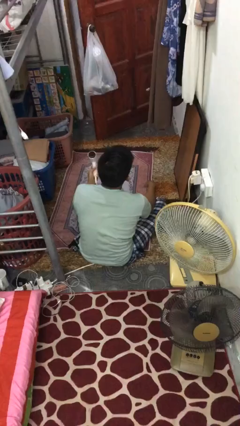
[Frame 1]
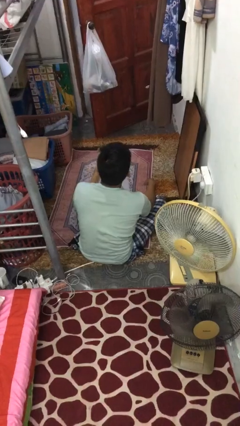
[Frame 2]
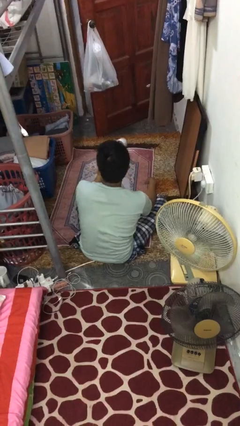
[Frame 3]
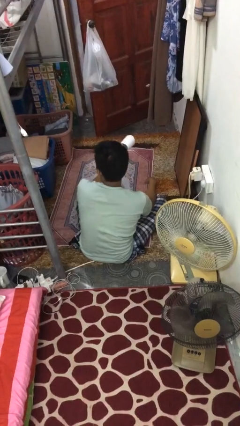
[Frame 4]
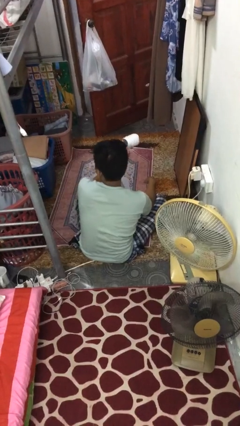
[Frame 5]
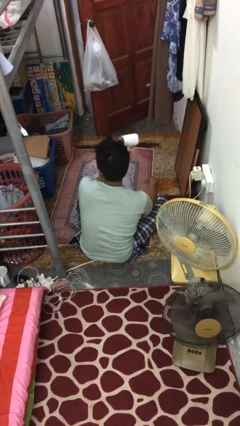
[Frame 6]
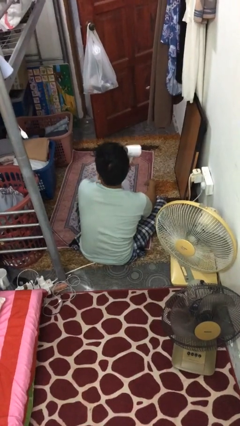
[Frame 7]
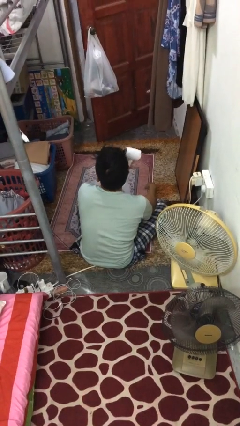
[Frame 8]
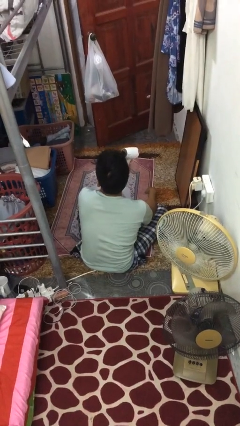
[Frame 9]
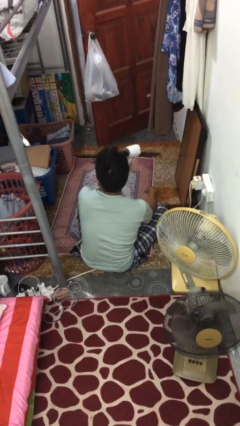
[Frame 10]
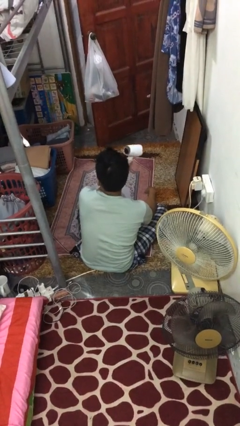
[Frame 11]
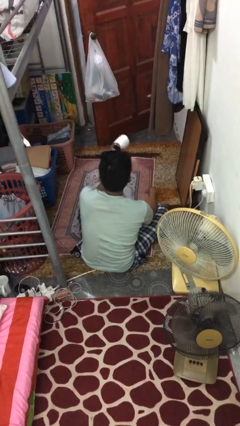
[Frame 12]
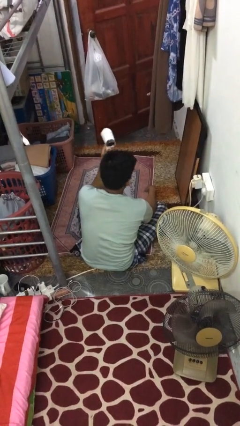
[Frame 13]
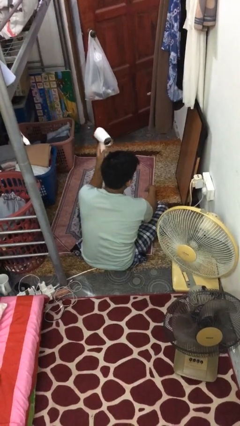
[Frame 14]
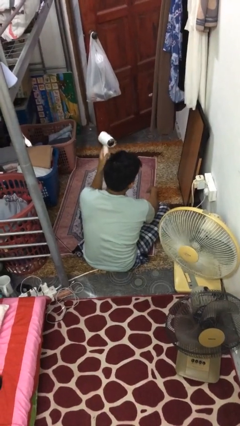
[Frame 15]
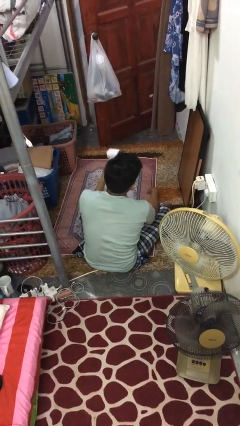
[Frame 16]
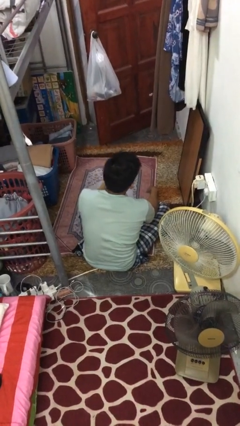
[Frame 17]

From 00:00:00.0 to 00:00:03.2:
person dries hair with hairdryer

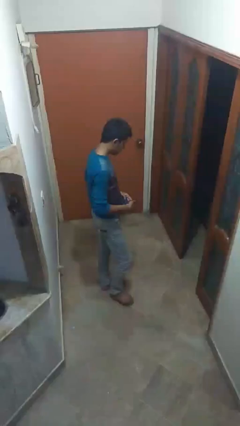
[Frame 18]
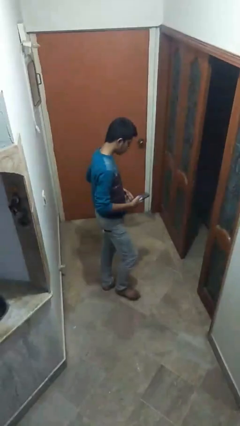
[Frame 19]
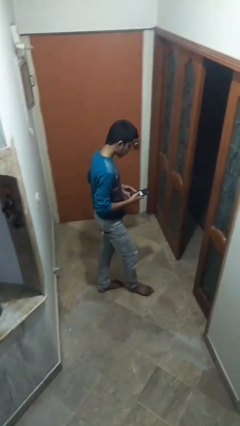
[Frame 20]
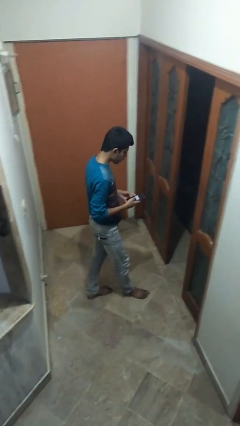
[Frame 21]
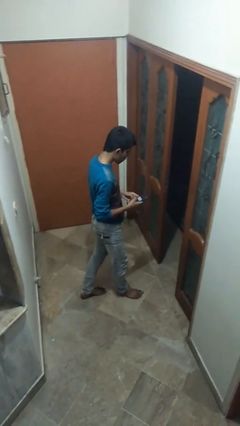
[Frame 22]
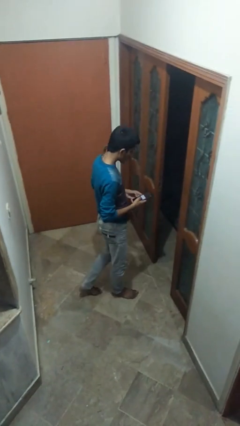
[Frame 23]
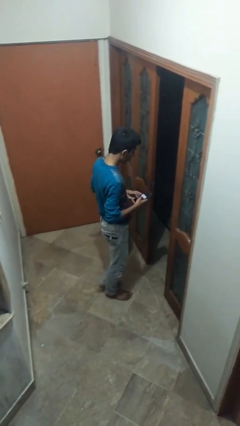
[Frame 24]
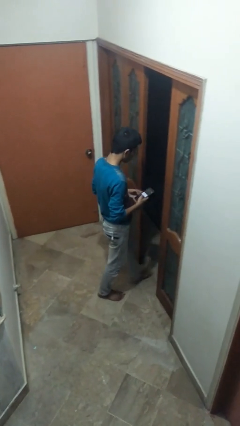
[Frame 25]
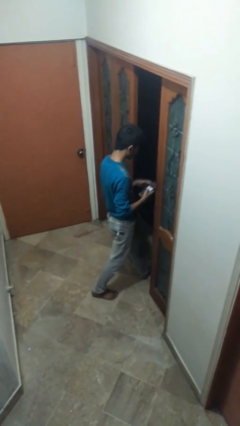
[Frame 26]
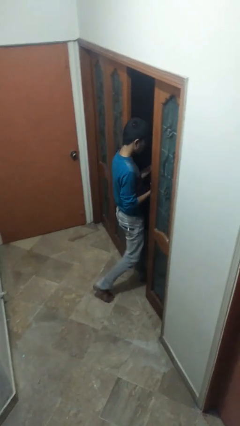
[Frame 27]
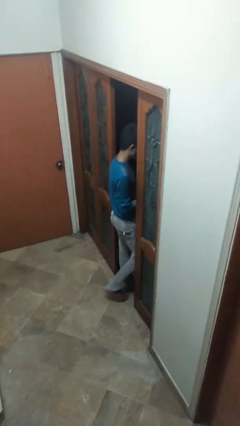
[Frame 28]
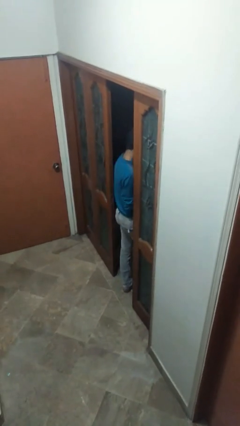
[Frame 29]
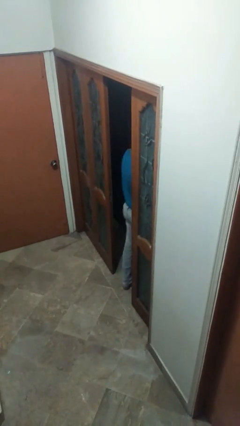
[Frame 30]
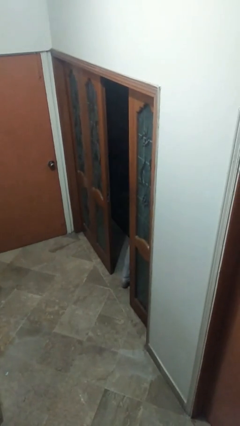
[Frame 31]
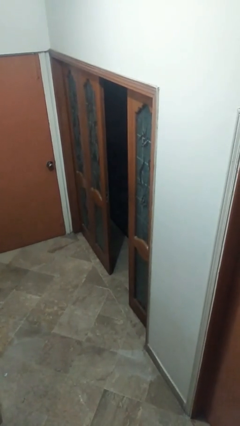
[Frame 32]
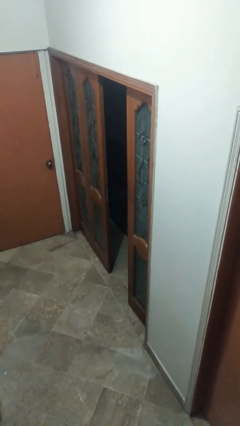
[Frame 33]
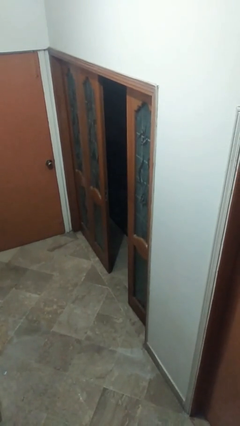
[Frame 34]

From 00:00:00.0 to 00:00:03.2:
person exits scene through structure

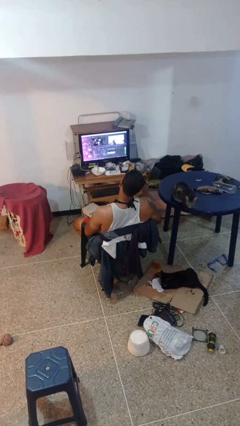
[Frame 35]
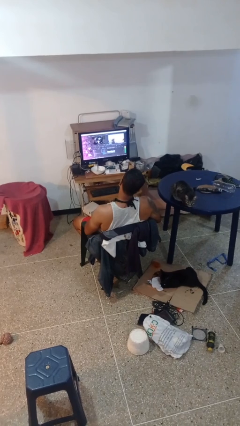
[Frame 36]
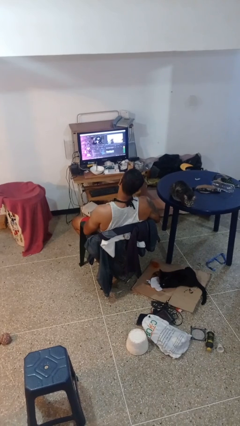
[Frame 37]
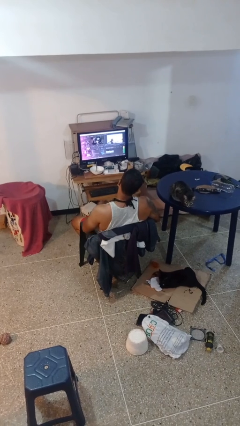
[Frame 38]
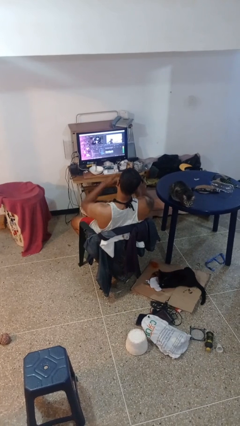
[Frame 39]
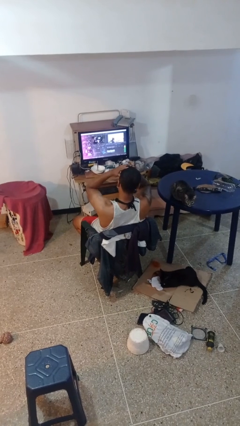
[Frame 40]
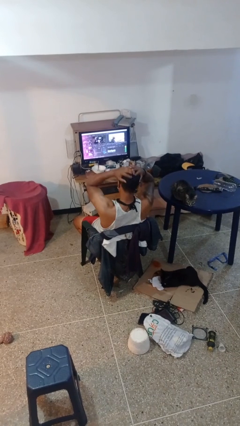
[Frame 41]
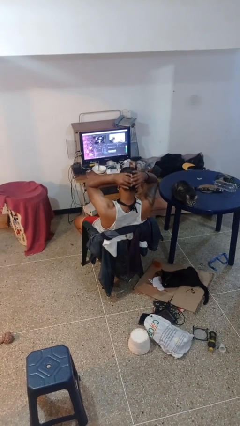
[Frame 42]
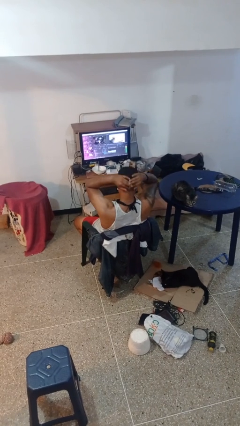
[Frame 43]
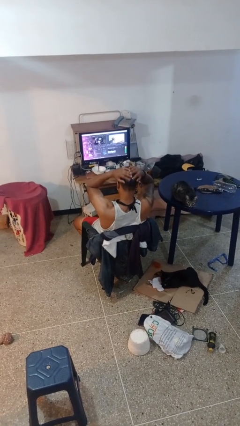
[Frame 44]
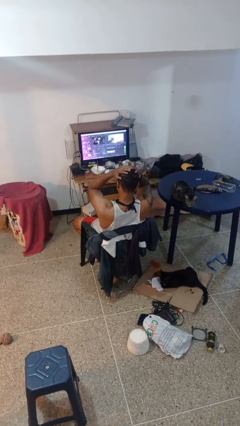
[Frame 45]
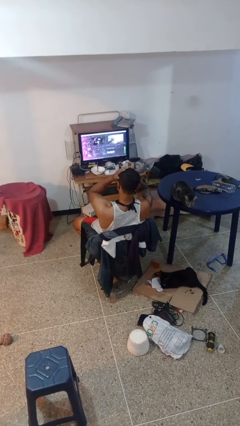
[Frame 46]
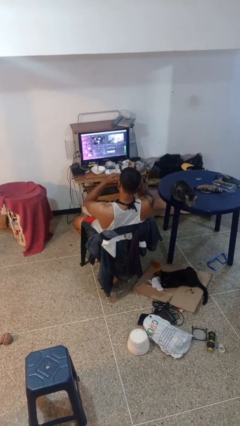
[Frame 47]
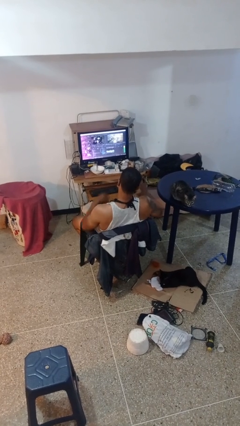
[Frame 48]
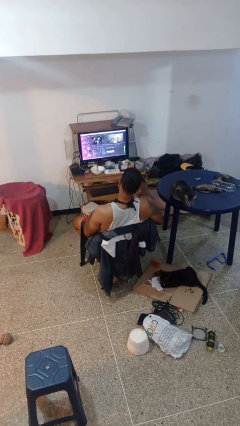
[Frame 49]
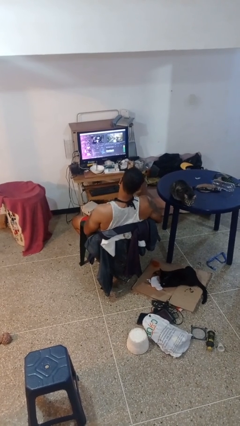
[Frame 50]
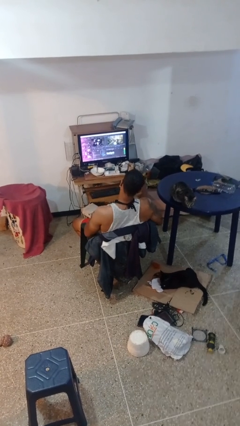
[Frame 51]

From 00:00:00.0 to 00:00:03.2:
person strokes hair

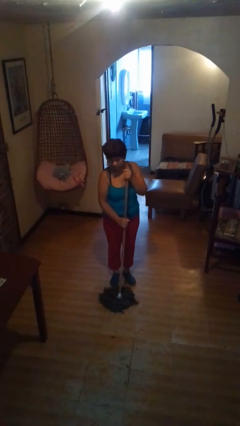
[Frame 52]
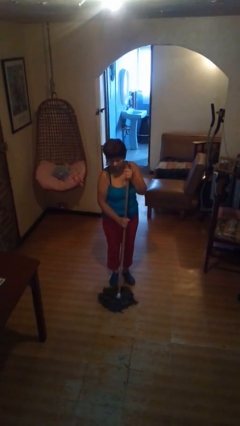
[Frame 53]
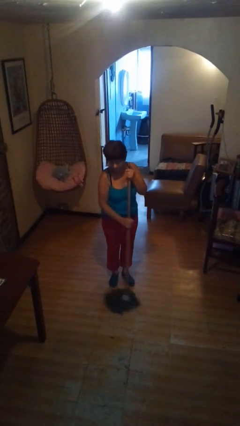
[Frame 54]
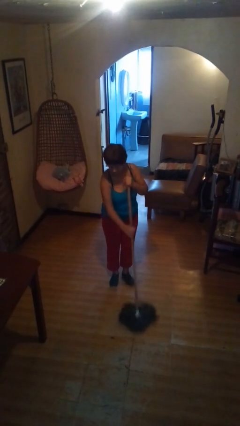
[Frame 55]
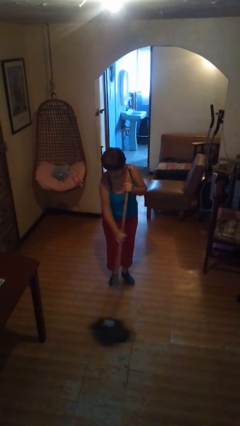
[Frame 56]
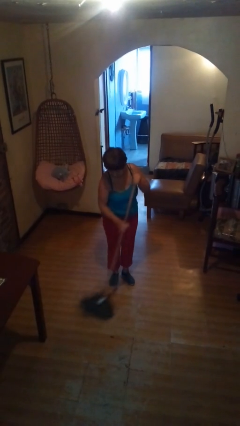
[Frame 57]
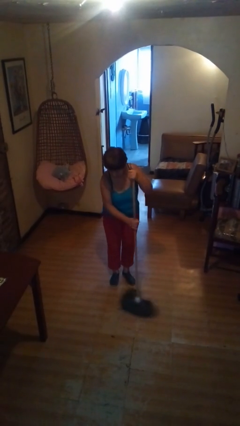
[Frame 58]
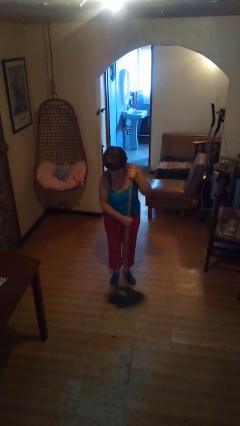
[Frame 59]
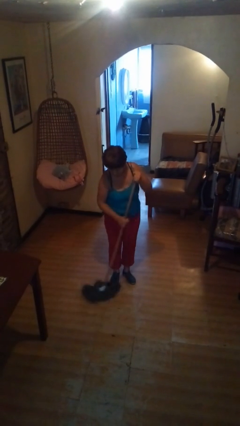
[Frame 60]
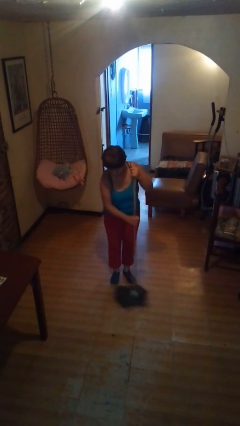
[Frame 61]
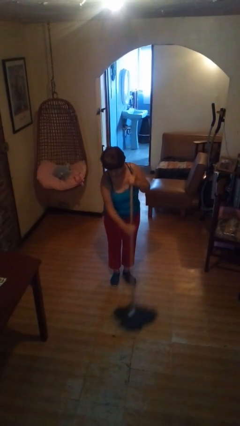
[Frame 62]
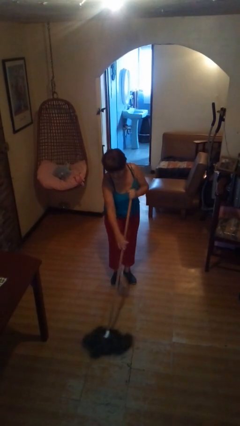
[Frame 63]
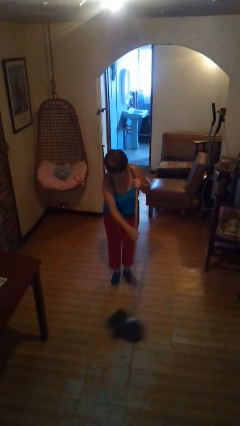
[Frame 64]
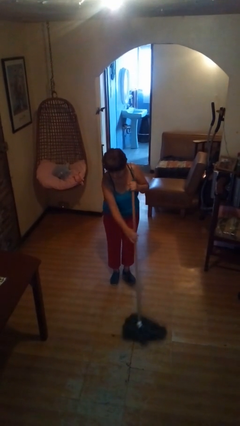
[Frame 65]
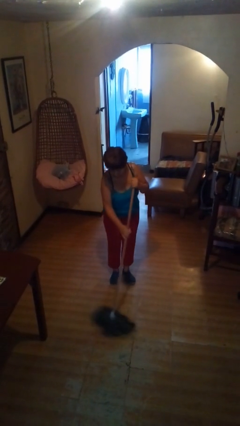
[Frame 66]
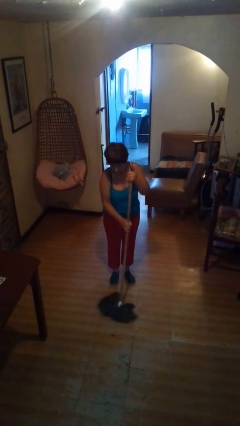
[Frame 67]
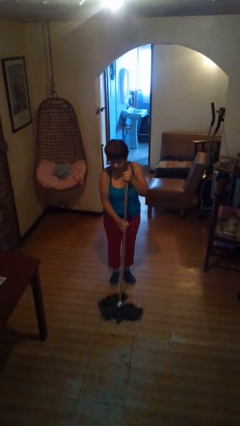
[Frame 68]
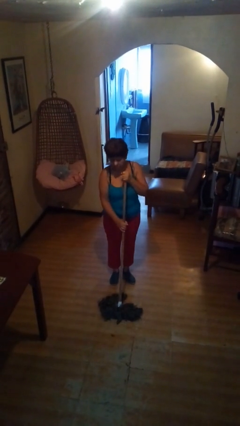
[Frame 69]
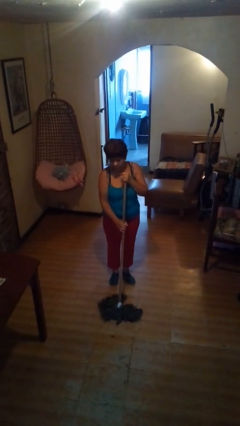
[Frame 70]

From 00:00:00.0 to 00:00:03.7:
person mops

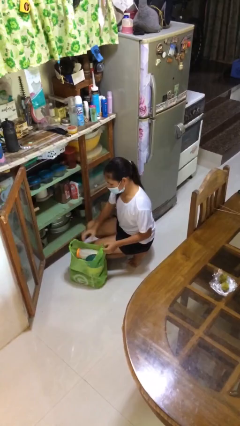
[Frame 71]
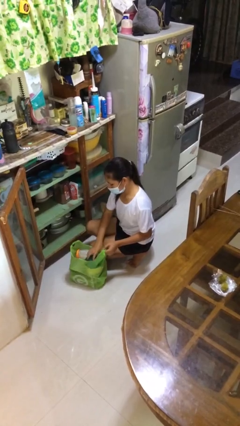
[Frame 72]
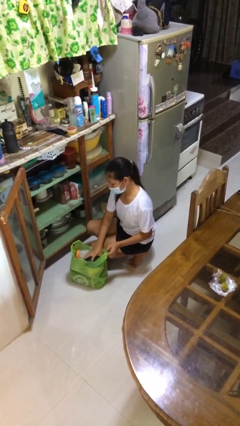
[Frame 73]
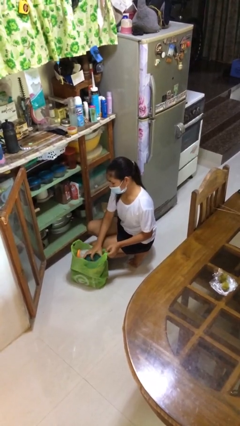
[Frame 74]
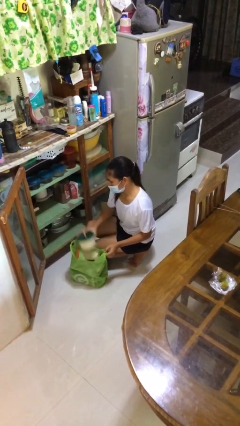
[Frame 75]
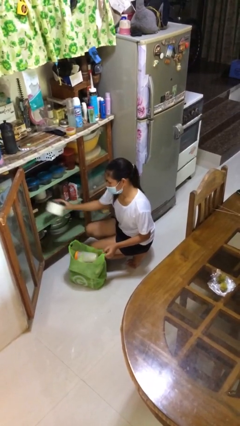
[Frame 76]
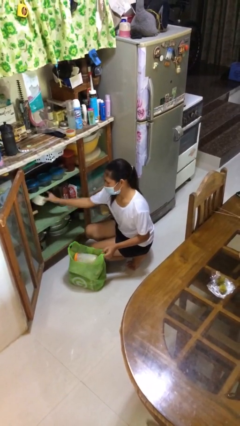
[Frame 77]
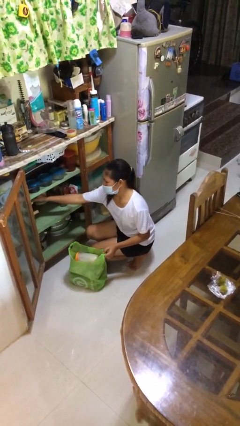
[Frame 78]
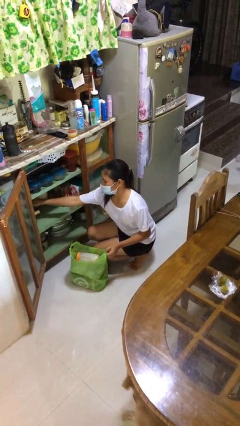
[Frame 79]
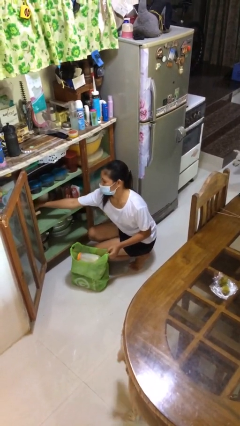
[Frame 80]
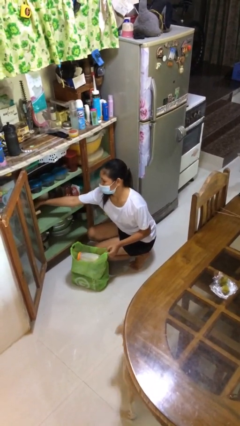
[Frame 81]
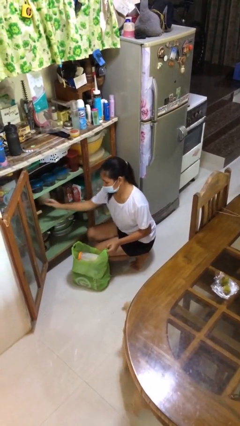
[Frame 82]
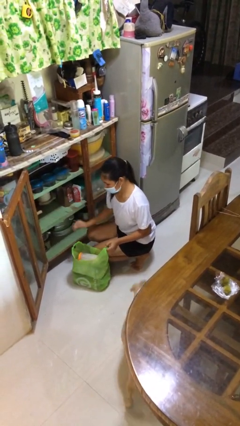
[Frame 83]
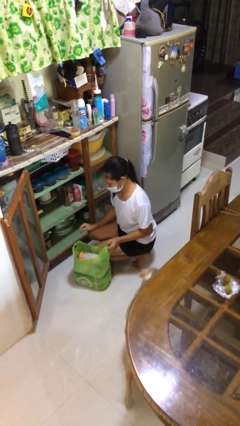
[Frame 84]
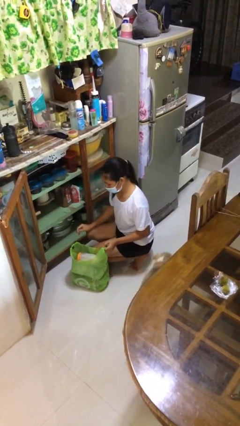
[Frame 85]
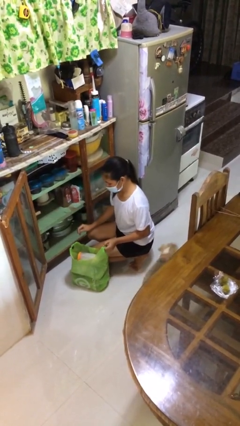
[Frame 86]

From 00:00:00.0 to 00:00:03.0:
person loads groceries into cabinet

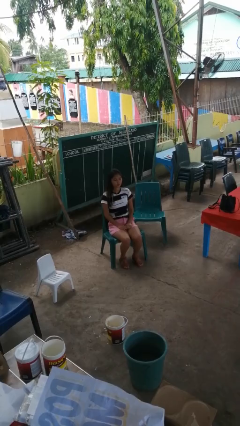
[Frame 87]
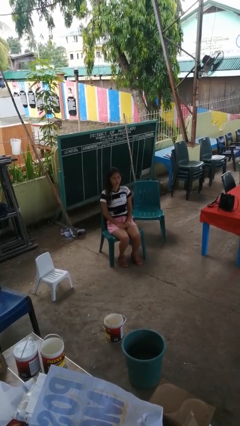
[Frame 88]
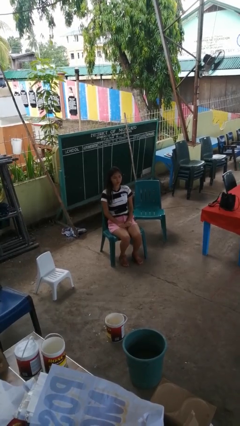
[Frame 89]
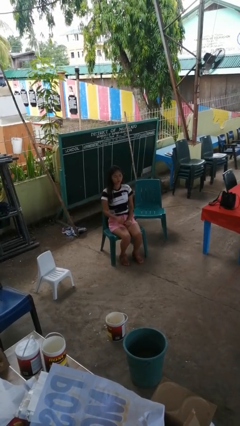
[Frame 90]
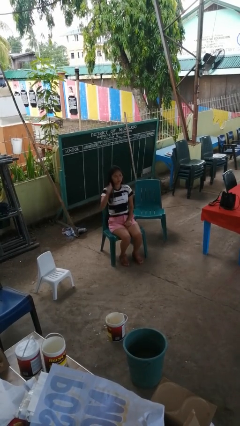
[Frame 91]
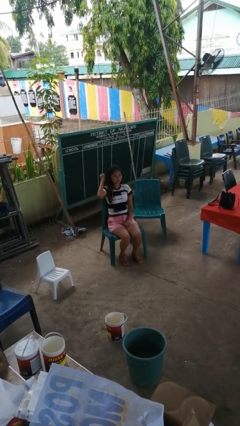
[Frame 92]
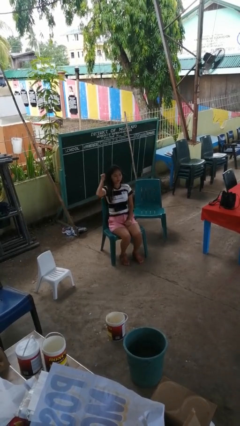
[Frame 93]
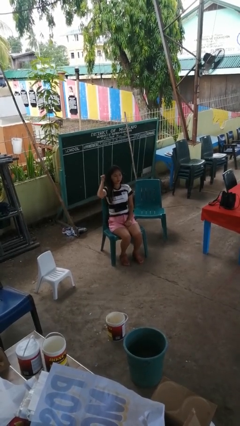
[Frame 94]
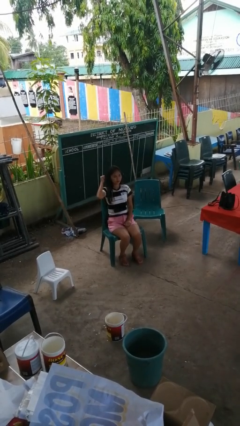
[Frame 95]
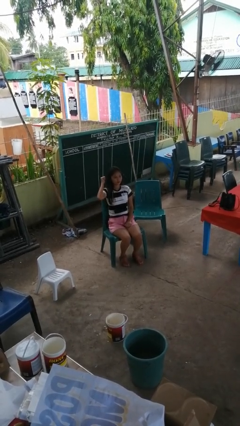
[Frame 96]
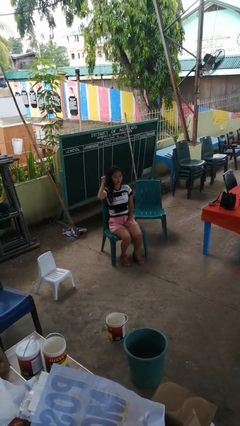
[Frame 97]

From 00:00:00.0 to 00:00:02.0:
person gestures behind me
